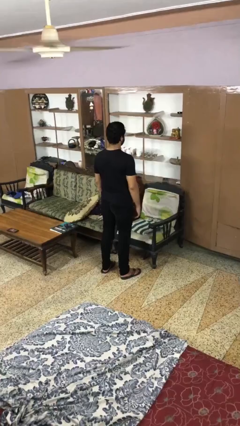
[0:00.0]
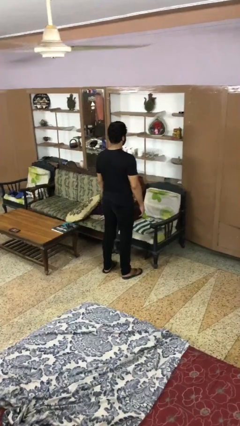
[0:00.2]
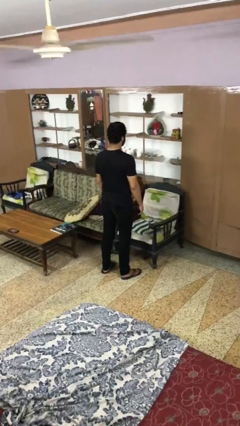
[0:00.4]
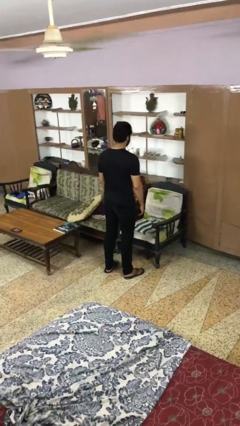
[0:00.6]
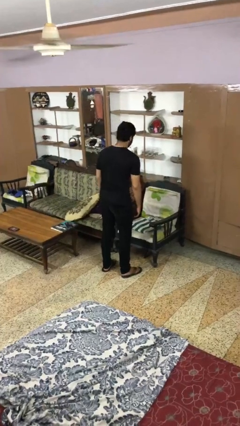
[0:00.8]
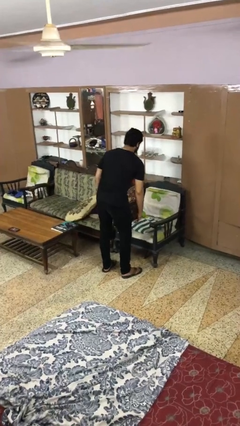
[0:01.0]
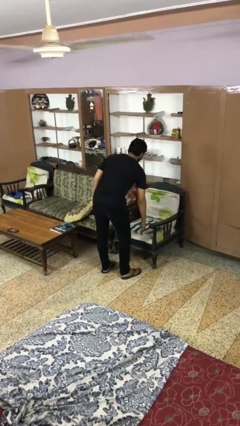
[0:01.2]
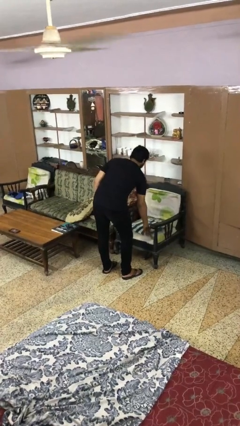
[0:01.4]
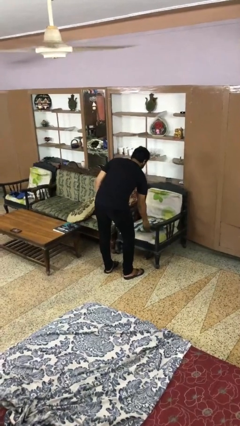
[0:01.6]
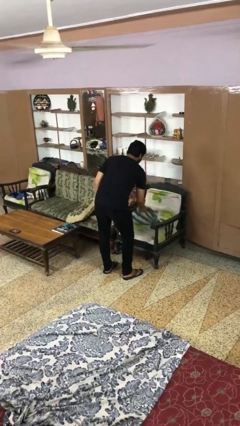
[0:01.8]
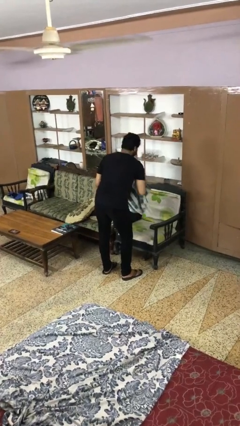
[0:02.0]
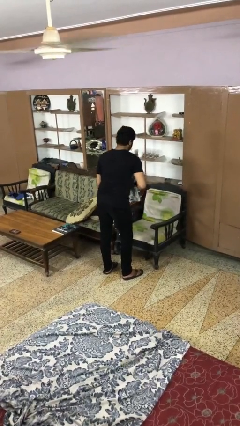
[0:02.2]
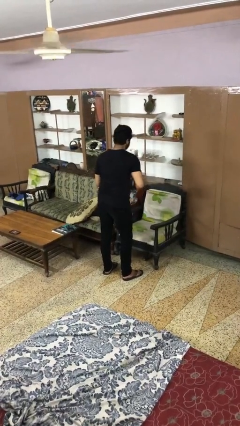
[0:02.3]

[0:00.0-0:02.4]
person picks up object from couch

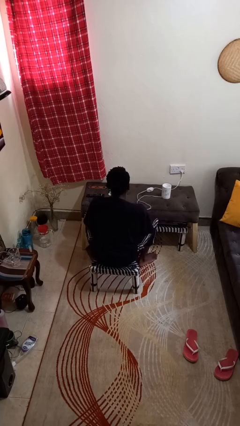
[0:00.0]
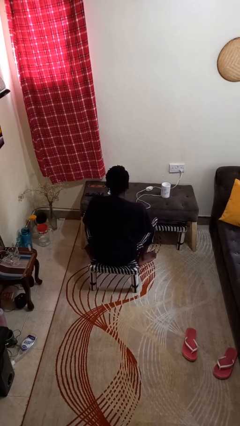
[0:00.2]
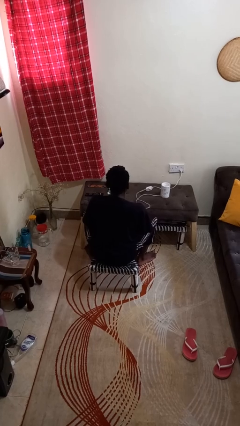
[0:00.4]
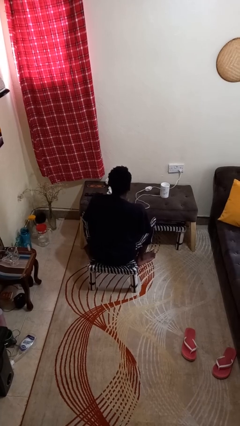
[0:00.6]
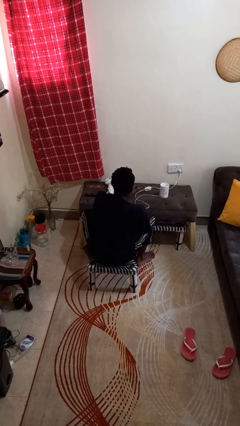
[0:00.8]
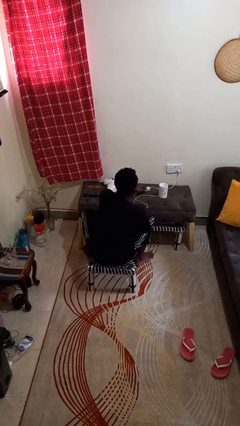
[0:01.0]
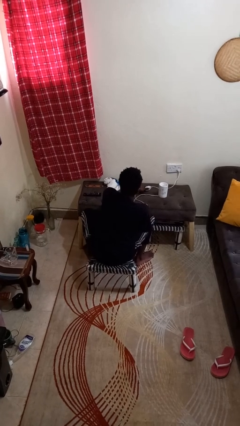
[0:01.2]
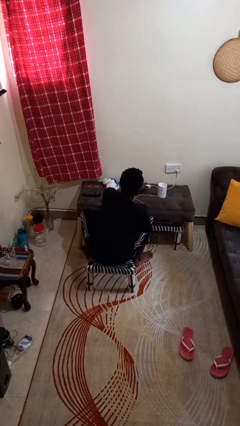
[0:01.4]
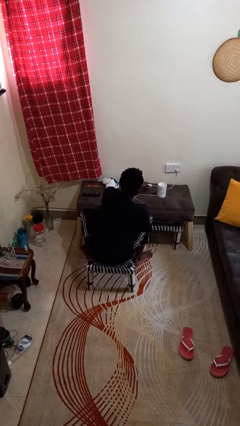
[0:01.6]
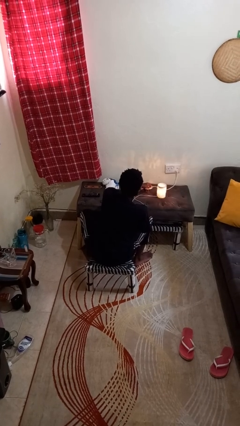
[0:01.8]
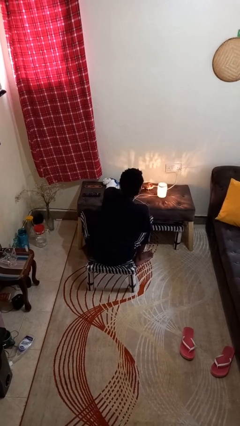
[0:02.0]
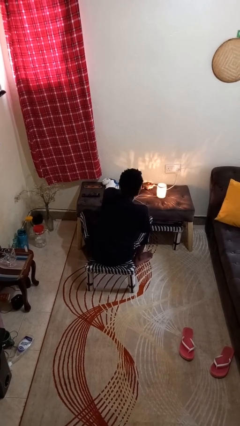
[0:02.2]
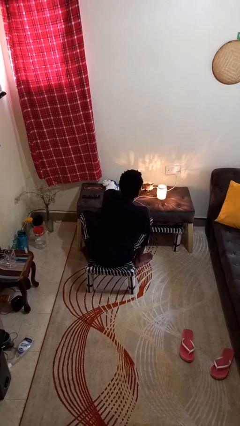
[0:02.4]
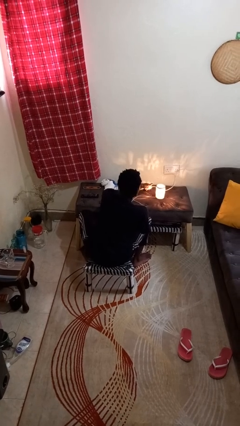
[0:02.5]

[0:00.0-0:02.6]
person turns on fan

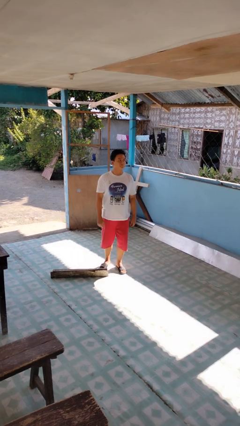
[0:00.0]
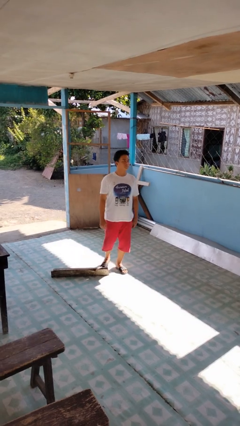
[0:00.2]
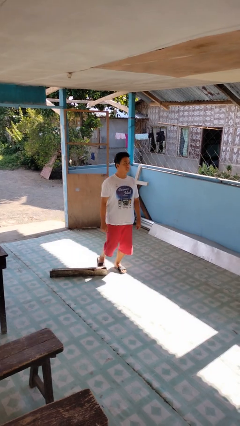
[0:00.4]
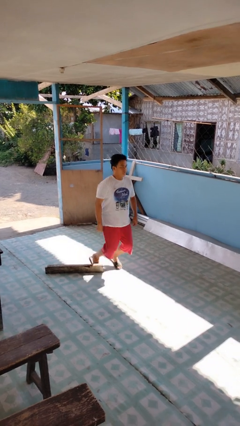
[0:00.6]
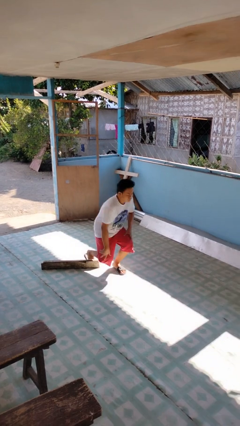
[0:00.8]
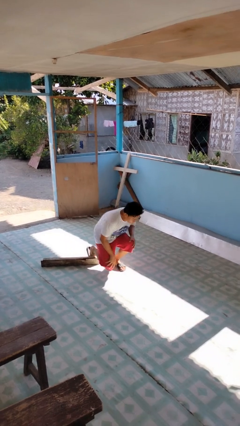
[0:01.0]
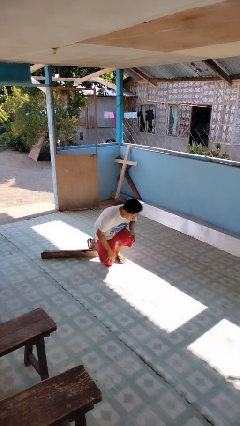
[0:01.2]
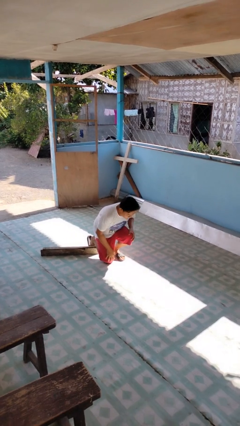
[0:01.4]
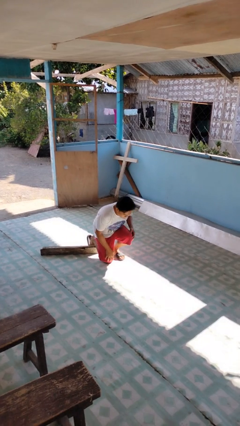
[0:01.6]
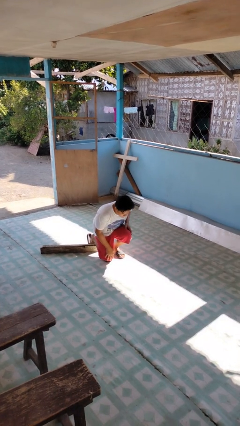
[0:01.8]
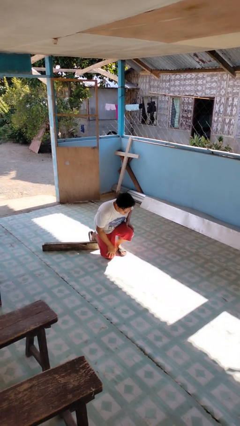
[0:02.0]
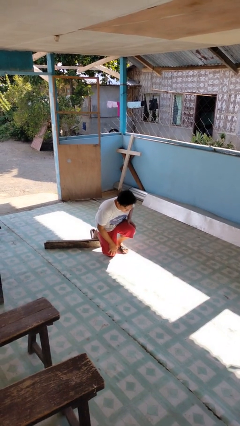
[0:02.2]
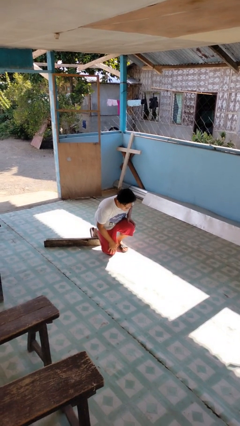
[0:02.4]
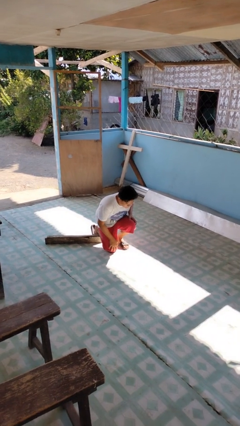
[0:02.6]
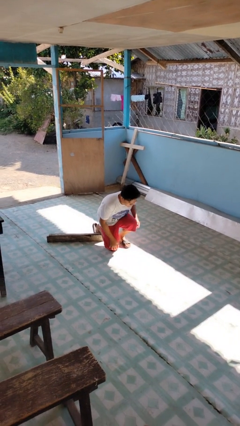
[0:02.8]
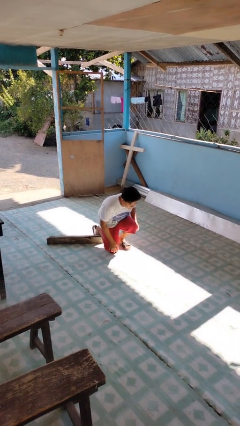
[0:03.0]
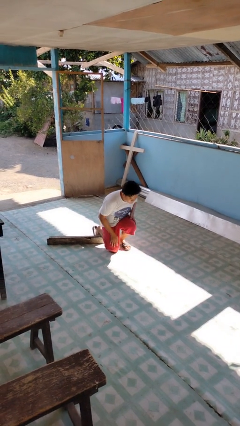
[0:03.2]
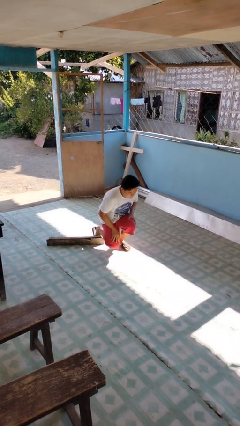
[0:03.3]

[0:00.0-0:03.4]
person trips on object on floor

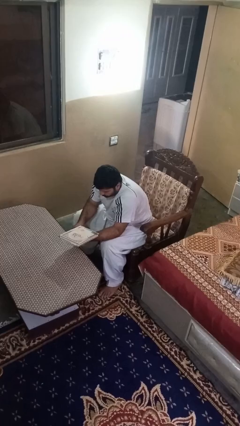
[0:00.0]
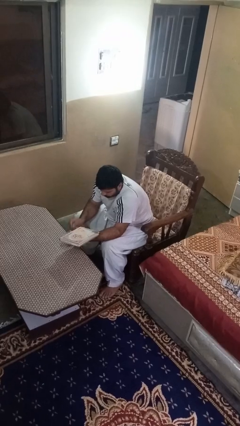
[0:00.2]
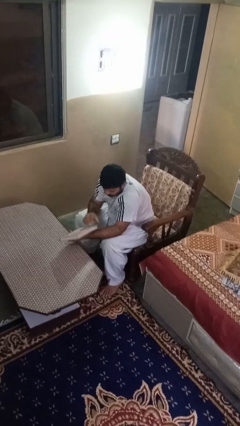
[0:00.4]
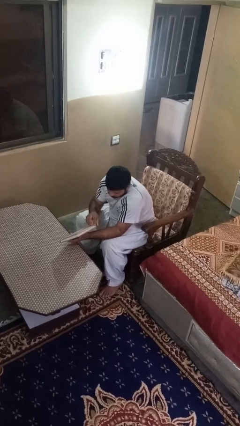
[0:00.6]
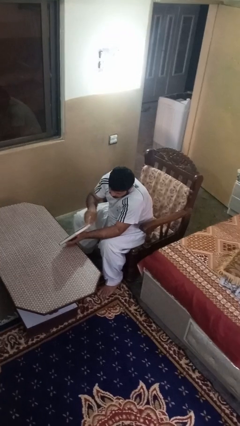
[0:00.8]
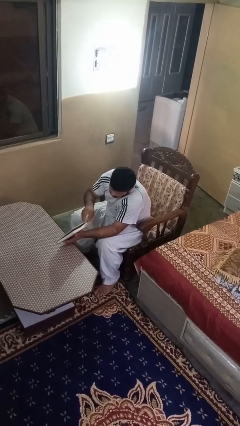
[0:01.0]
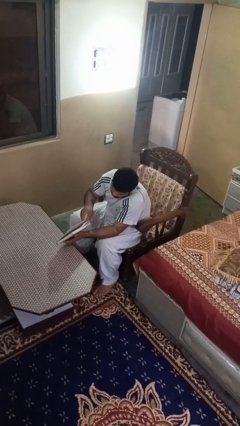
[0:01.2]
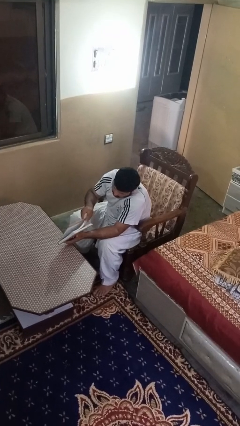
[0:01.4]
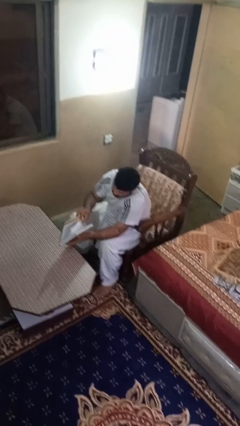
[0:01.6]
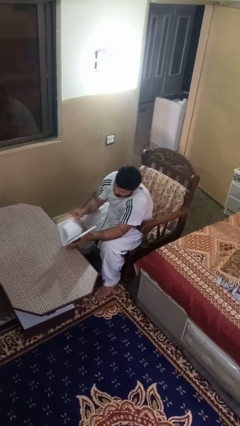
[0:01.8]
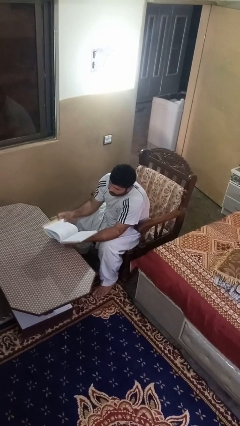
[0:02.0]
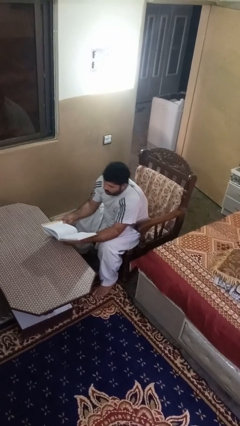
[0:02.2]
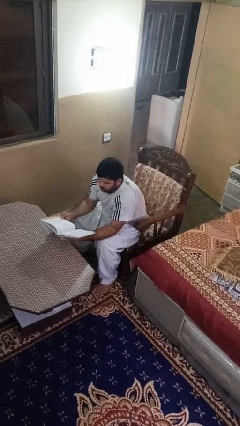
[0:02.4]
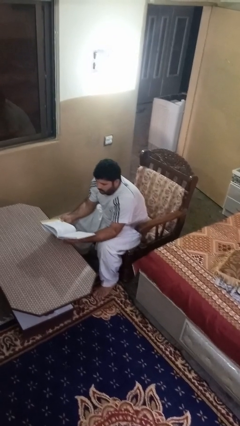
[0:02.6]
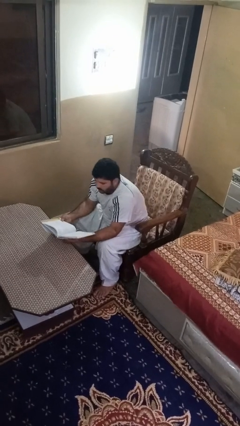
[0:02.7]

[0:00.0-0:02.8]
person reads book

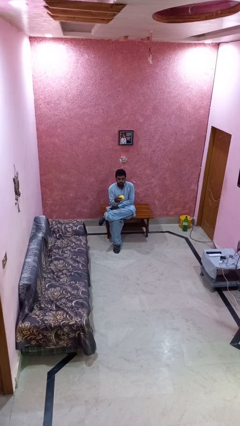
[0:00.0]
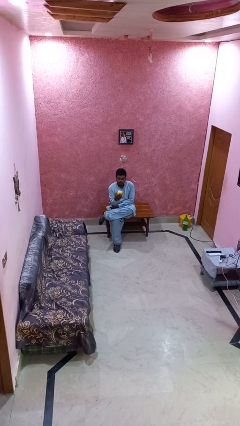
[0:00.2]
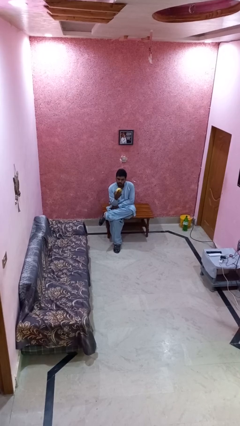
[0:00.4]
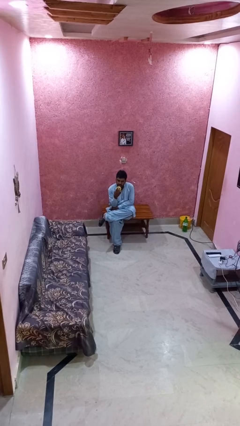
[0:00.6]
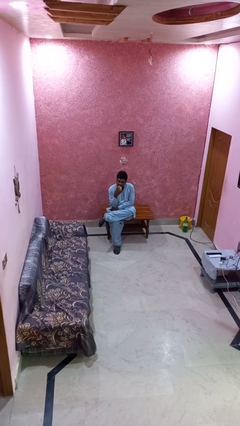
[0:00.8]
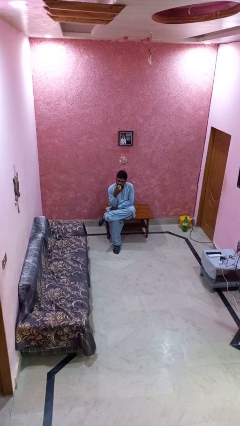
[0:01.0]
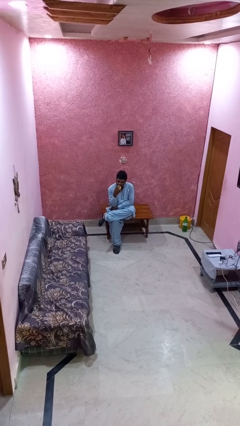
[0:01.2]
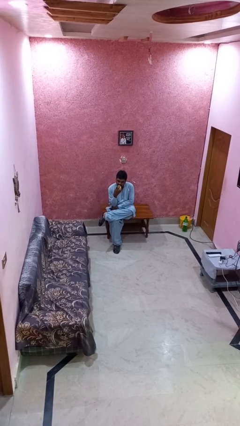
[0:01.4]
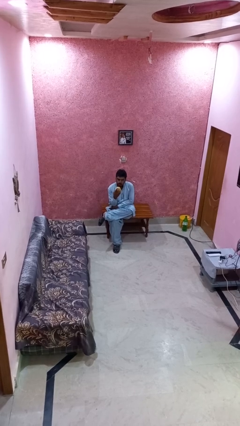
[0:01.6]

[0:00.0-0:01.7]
person eats apple

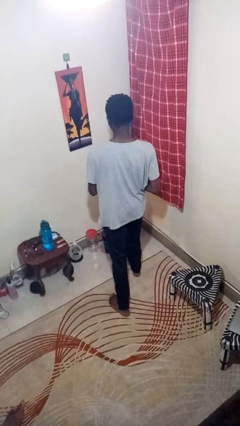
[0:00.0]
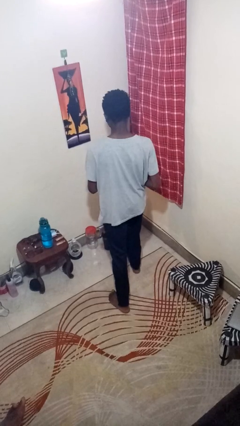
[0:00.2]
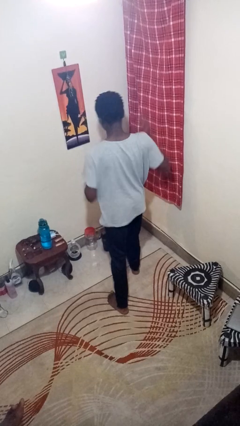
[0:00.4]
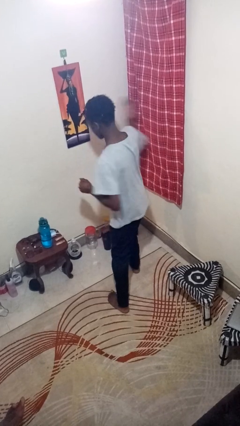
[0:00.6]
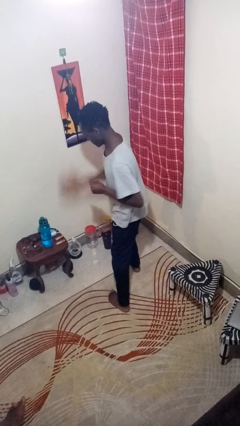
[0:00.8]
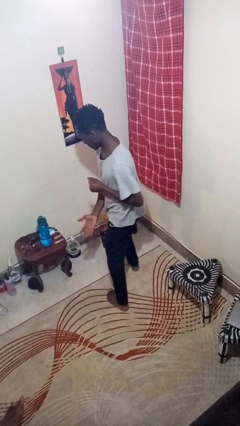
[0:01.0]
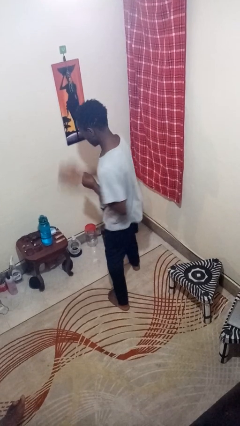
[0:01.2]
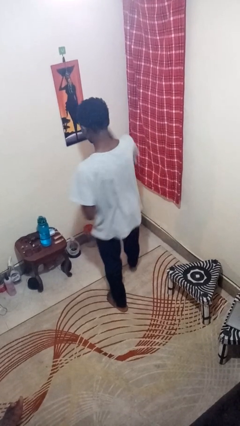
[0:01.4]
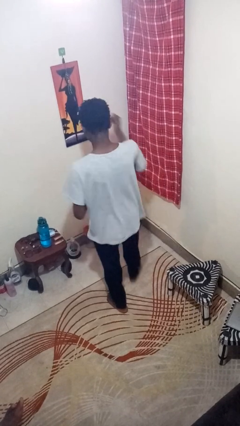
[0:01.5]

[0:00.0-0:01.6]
person karate chop

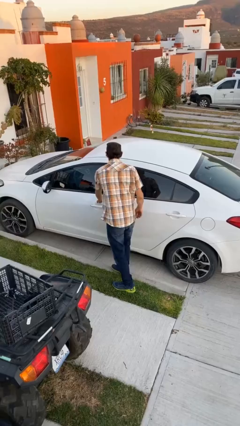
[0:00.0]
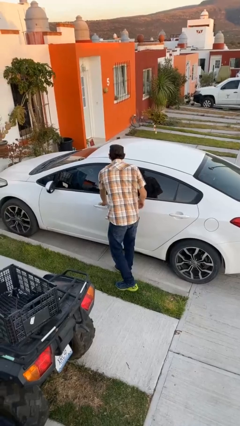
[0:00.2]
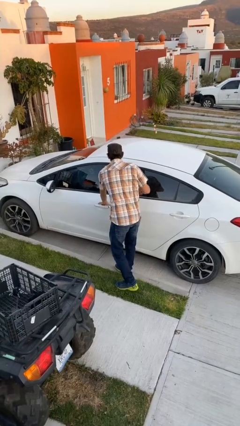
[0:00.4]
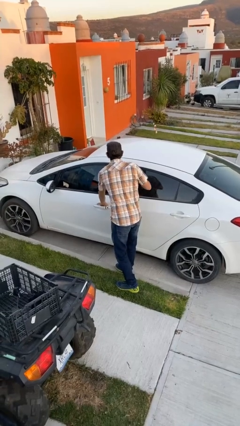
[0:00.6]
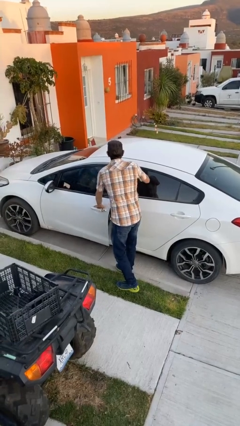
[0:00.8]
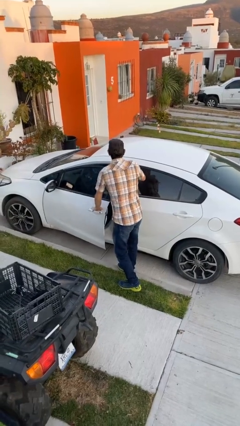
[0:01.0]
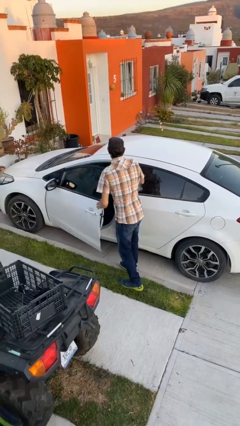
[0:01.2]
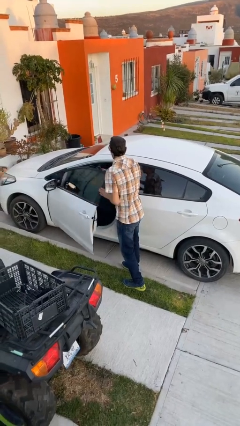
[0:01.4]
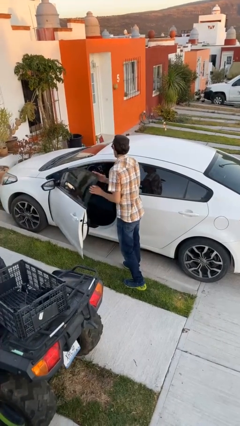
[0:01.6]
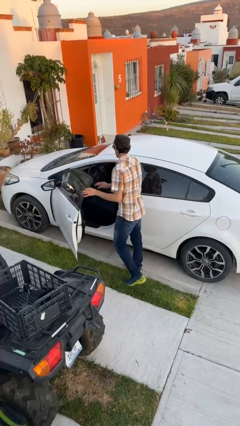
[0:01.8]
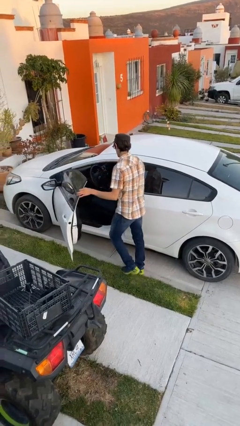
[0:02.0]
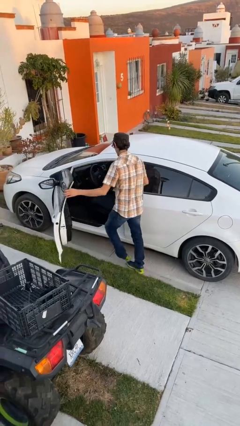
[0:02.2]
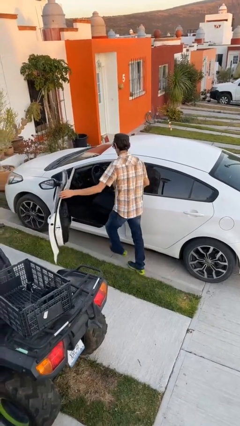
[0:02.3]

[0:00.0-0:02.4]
person opens car door

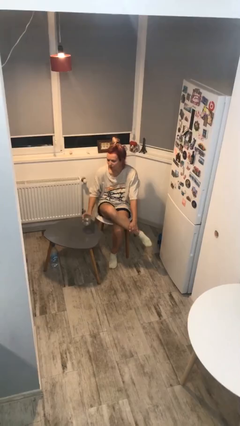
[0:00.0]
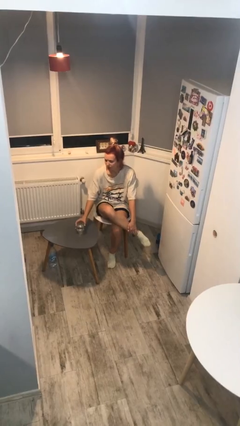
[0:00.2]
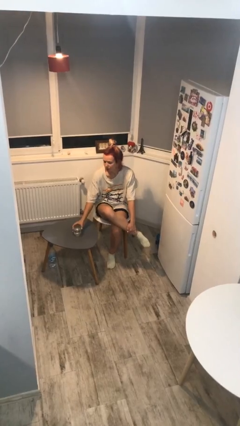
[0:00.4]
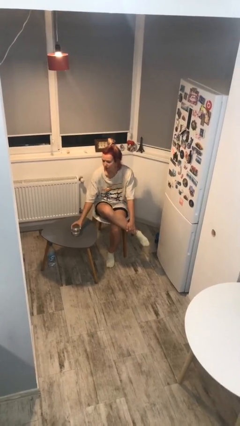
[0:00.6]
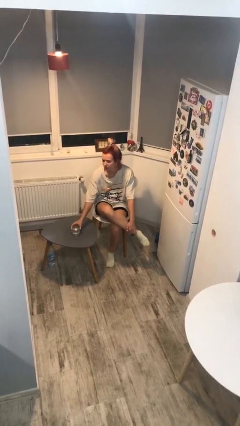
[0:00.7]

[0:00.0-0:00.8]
person puts down object on table
